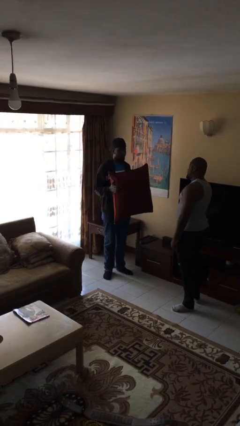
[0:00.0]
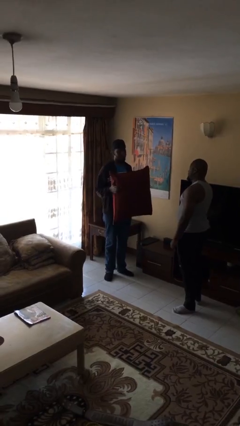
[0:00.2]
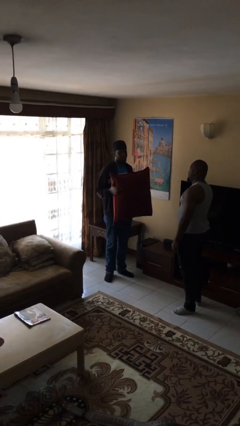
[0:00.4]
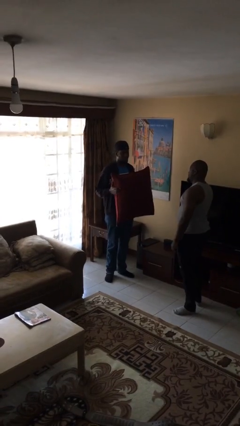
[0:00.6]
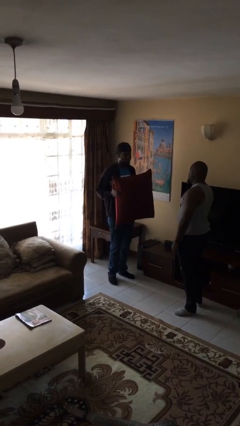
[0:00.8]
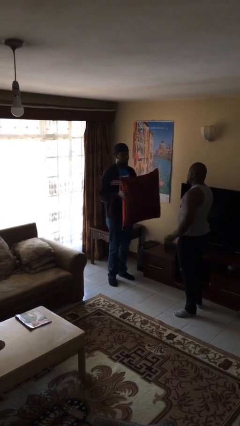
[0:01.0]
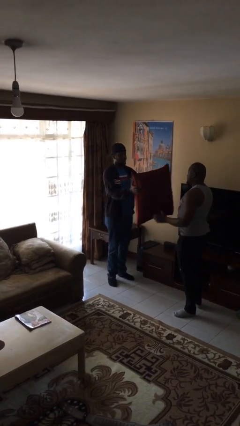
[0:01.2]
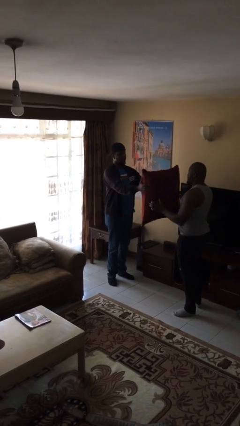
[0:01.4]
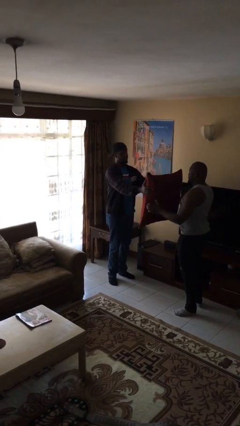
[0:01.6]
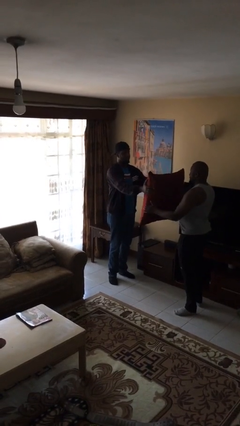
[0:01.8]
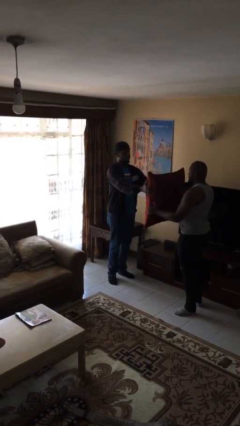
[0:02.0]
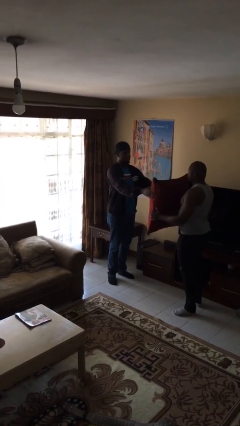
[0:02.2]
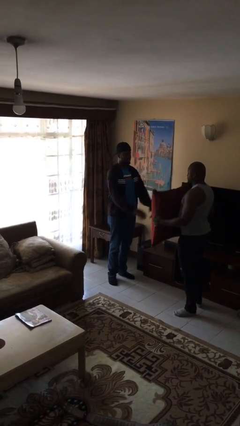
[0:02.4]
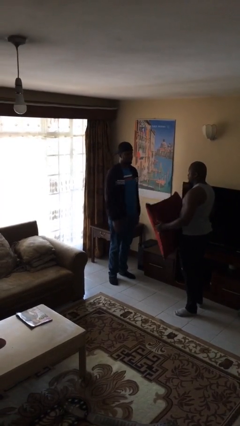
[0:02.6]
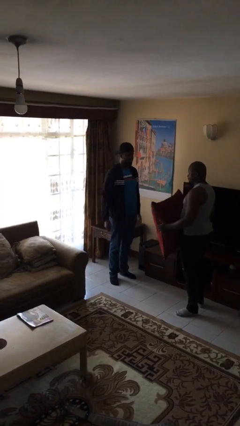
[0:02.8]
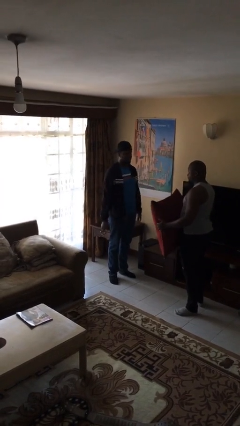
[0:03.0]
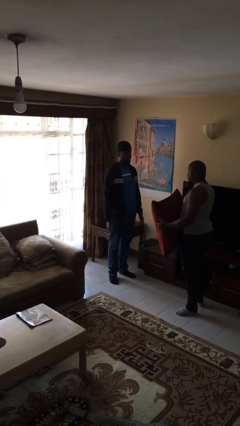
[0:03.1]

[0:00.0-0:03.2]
person transfers object to person

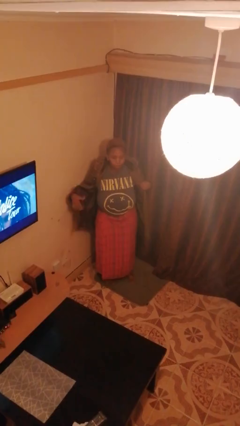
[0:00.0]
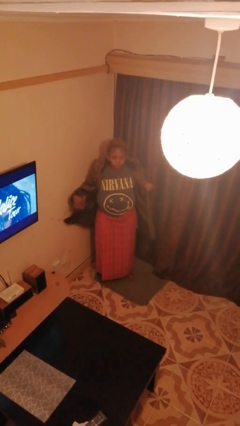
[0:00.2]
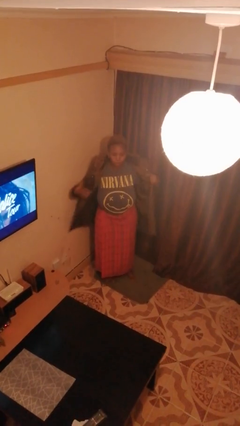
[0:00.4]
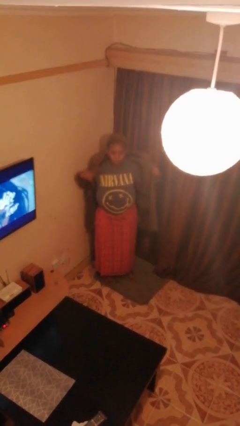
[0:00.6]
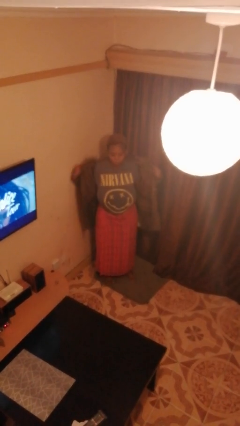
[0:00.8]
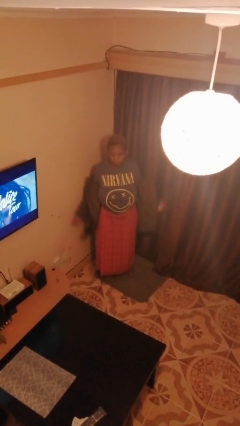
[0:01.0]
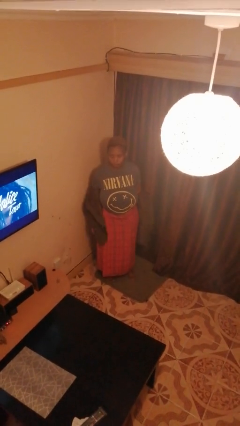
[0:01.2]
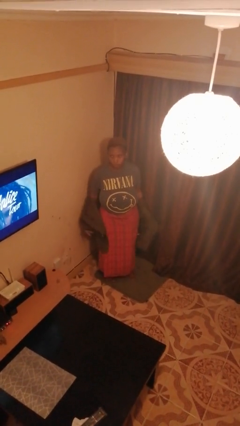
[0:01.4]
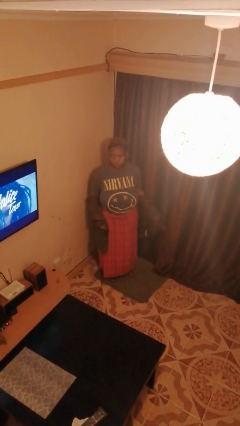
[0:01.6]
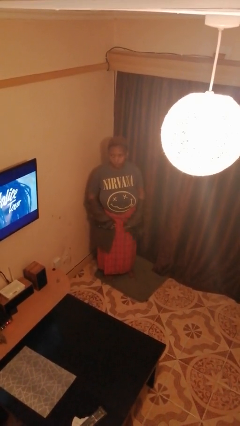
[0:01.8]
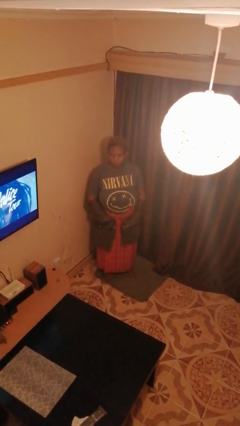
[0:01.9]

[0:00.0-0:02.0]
person takes off jacket

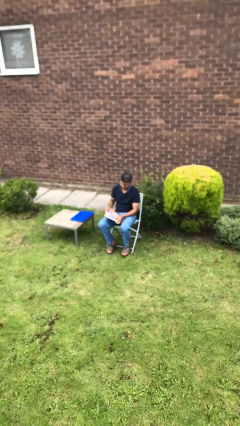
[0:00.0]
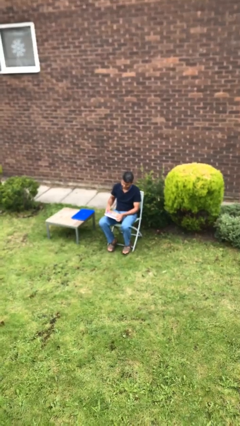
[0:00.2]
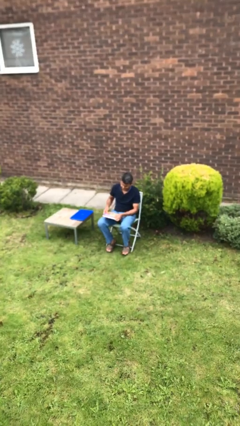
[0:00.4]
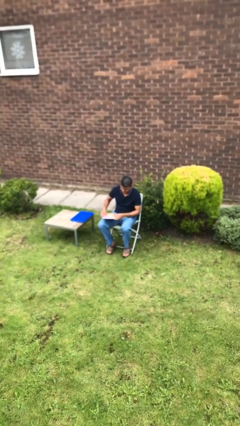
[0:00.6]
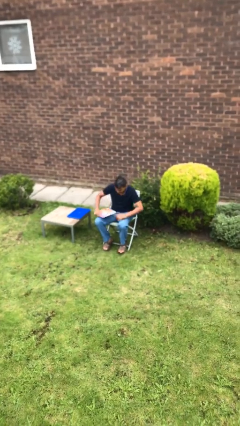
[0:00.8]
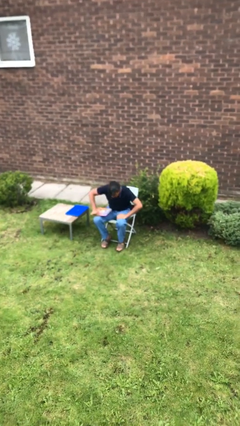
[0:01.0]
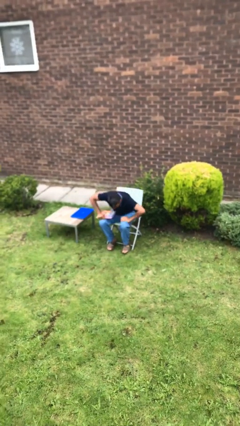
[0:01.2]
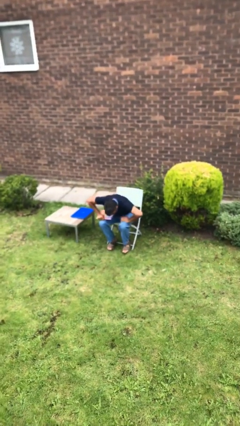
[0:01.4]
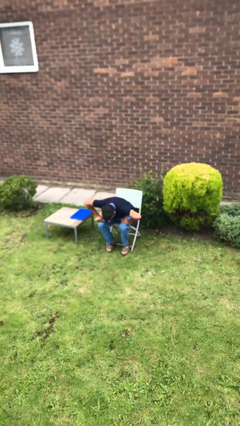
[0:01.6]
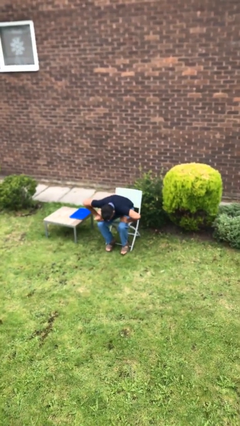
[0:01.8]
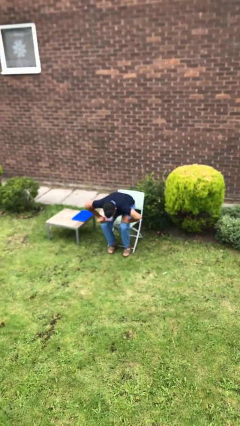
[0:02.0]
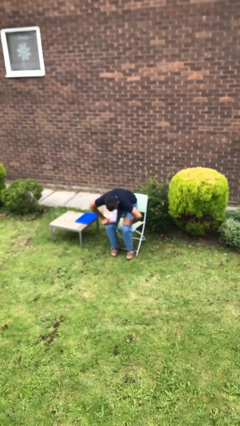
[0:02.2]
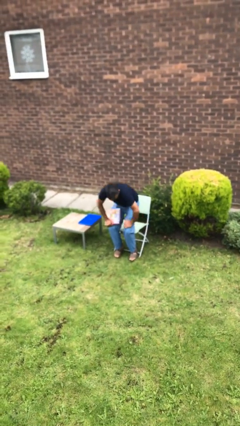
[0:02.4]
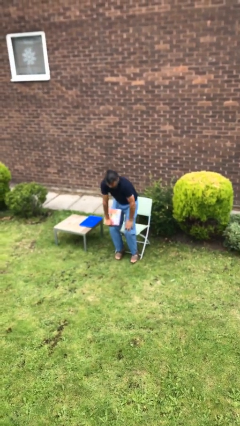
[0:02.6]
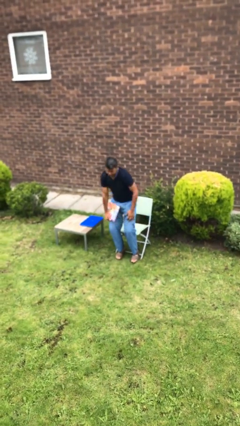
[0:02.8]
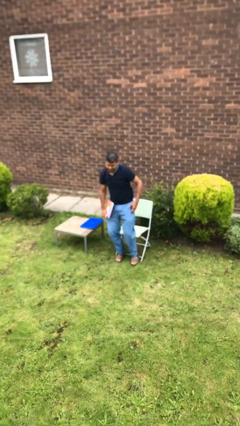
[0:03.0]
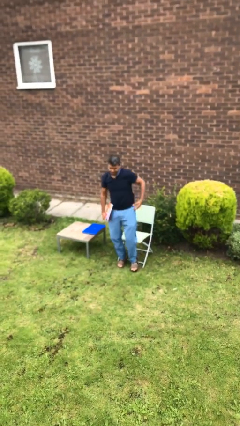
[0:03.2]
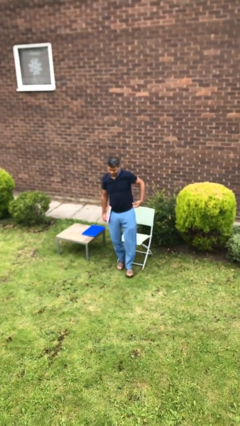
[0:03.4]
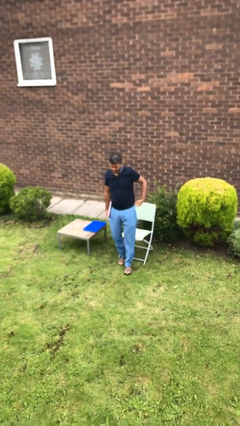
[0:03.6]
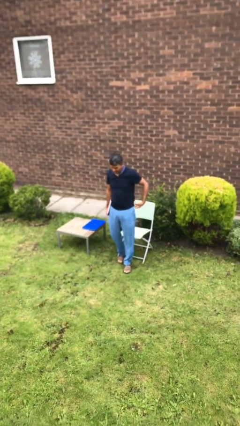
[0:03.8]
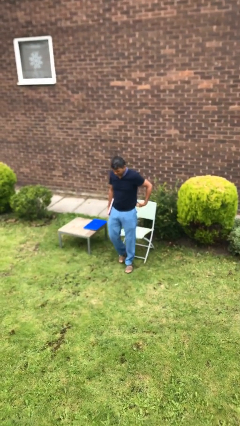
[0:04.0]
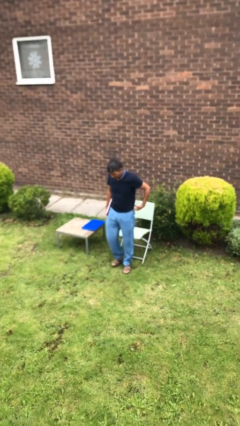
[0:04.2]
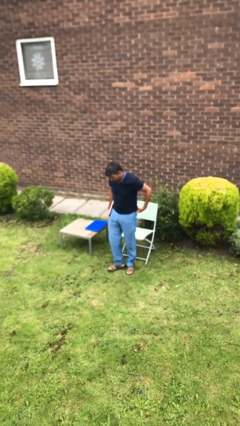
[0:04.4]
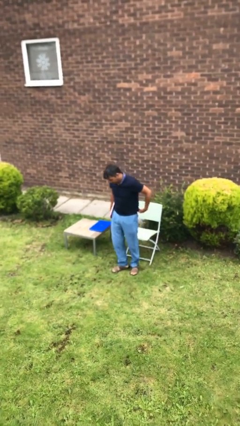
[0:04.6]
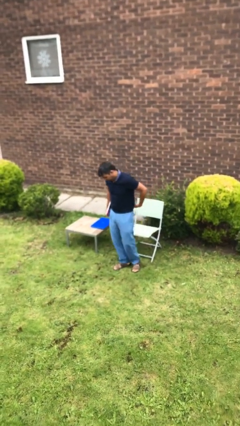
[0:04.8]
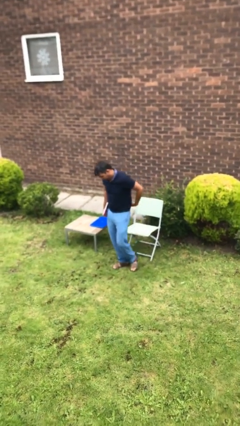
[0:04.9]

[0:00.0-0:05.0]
person stands up

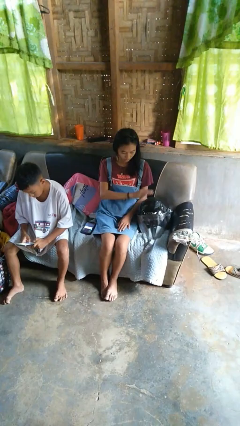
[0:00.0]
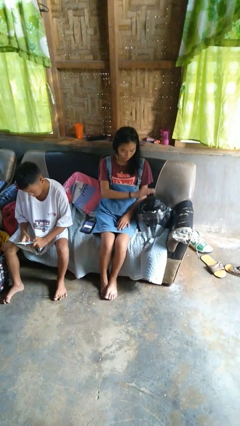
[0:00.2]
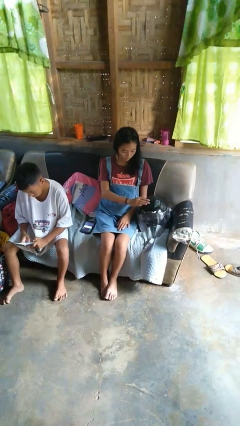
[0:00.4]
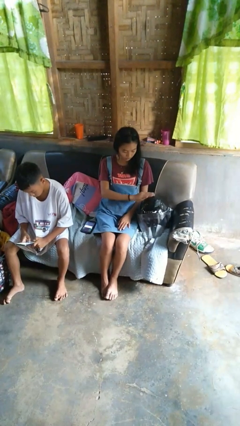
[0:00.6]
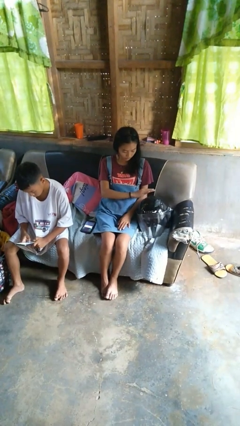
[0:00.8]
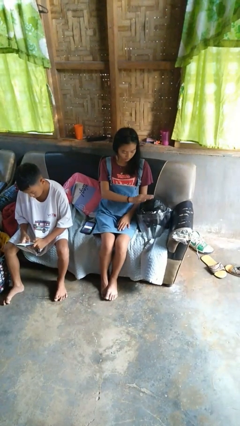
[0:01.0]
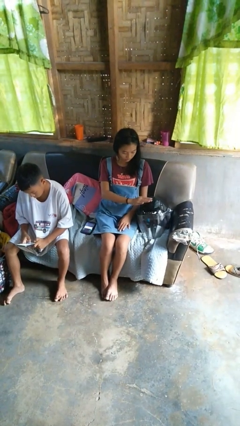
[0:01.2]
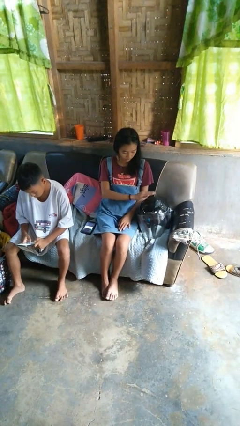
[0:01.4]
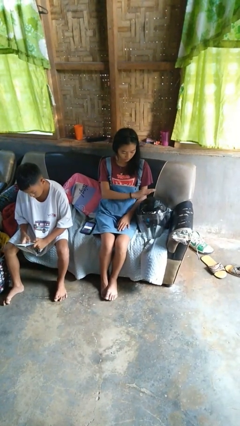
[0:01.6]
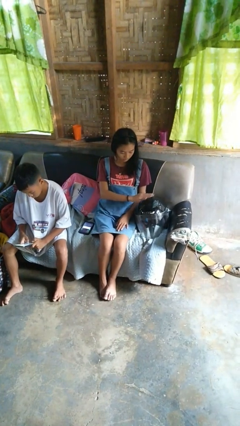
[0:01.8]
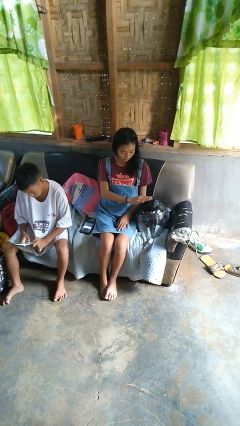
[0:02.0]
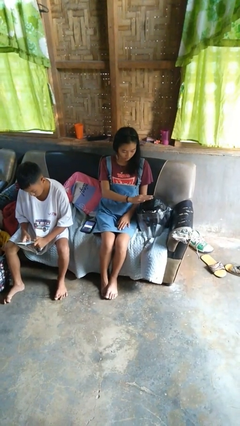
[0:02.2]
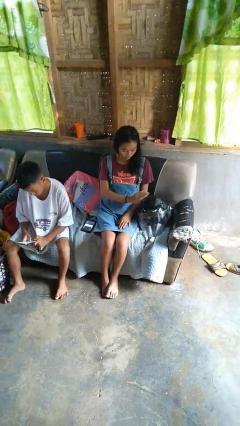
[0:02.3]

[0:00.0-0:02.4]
person waves hand over object

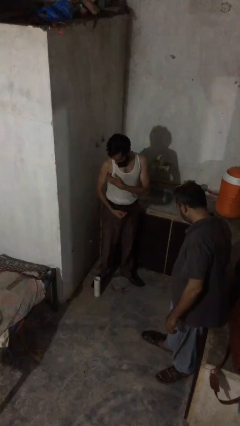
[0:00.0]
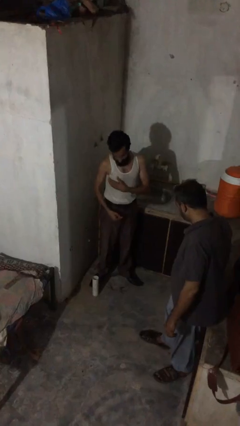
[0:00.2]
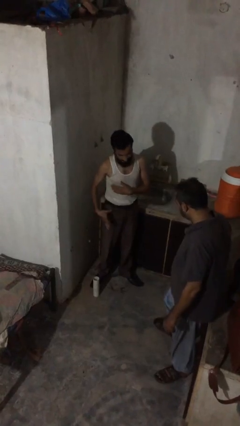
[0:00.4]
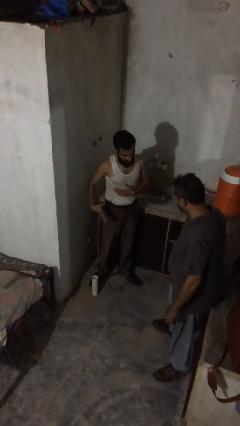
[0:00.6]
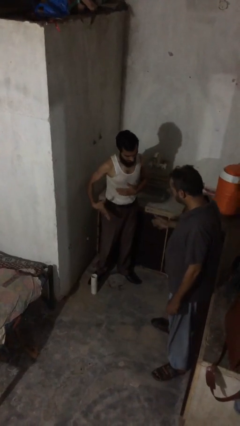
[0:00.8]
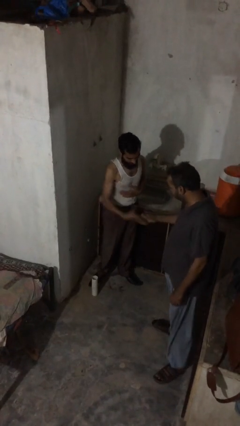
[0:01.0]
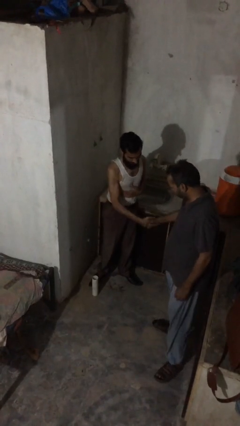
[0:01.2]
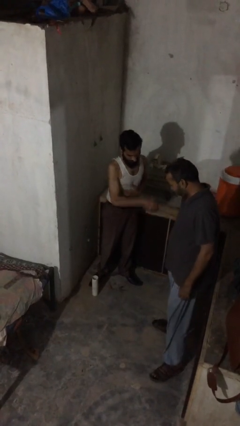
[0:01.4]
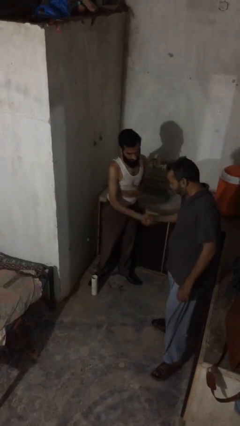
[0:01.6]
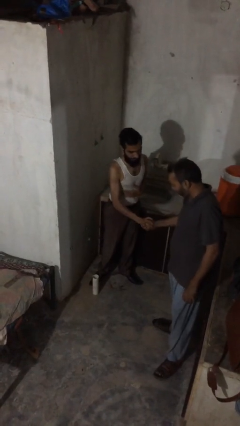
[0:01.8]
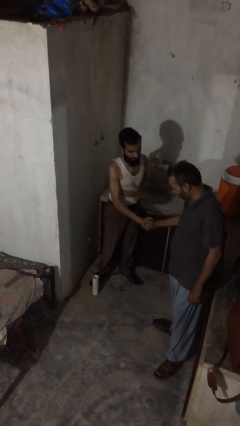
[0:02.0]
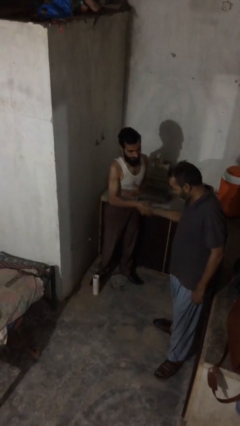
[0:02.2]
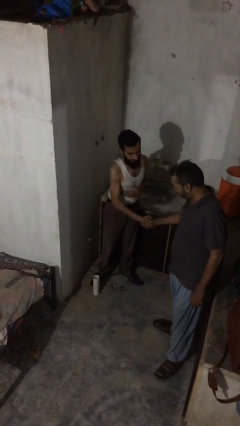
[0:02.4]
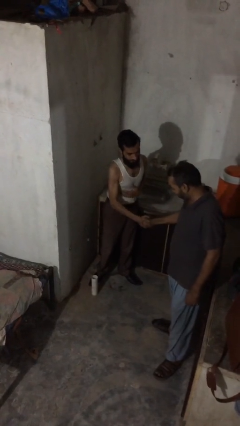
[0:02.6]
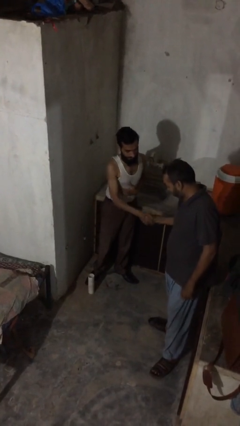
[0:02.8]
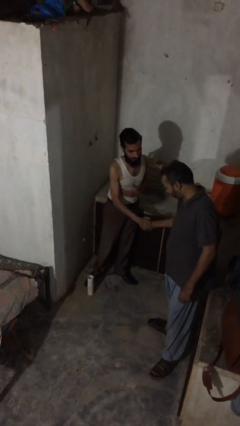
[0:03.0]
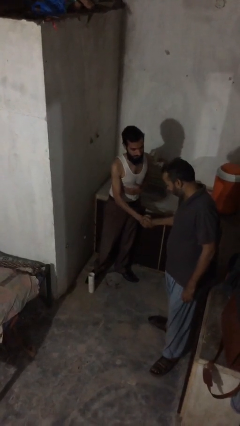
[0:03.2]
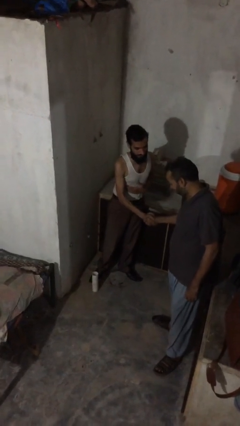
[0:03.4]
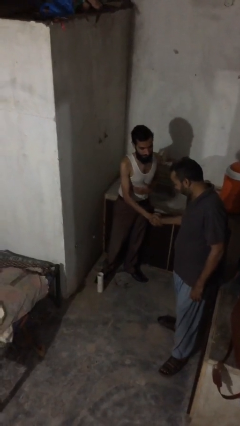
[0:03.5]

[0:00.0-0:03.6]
person shakes hand

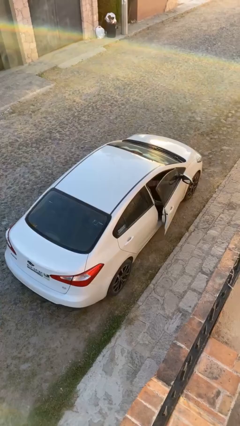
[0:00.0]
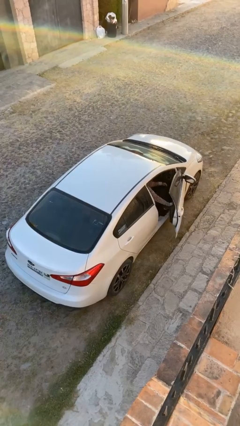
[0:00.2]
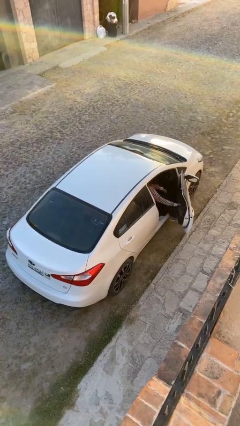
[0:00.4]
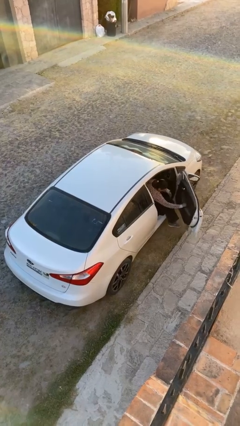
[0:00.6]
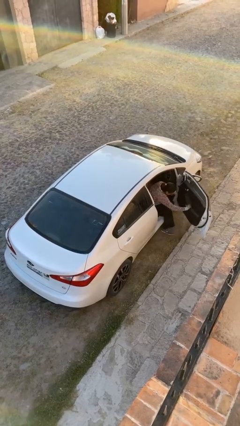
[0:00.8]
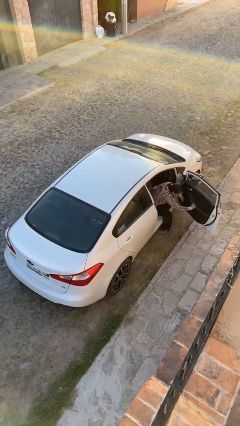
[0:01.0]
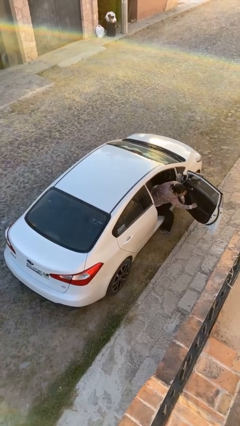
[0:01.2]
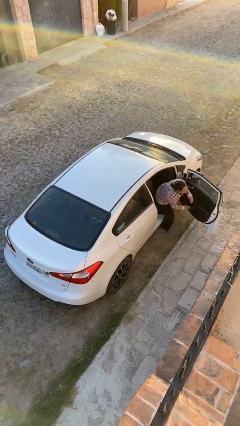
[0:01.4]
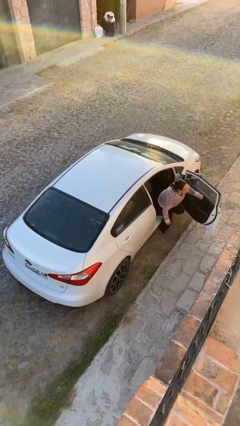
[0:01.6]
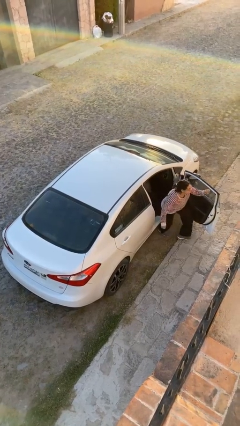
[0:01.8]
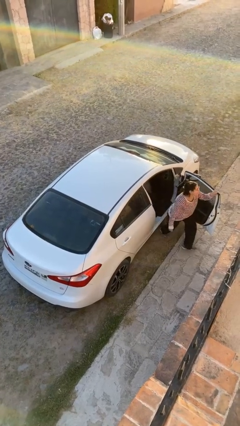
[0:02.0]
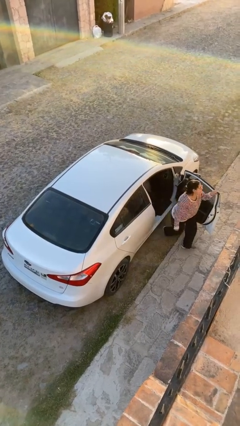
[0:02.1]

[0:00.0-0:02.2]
car drops off person
